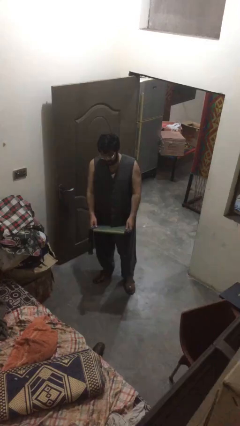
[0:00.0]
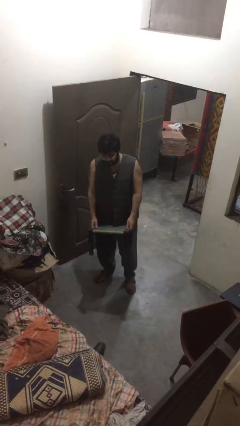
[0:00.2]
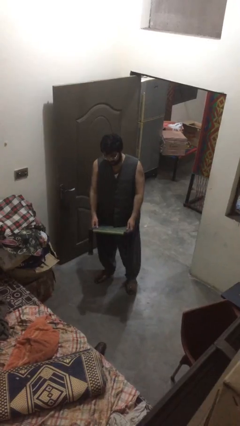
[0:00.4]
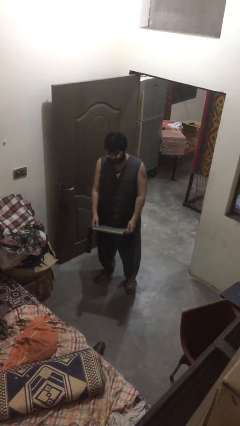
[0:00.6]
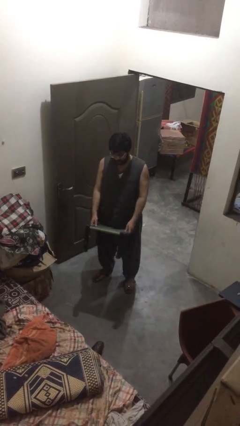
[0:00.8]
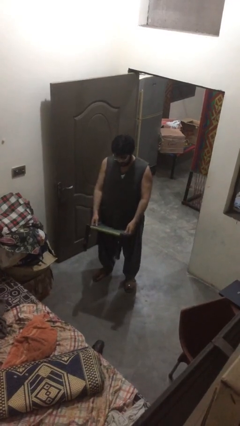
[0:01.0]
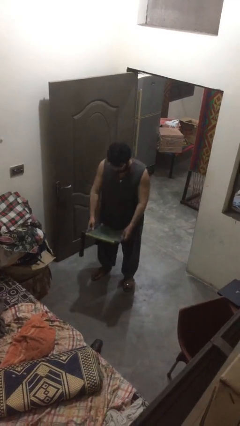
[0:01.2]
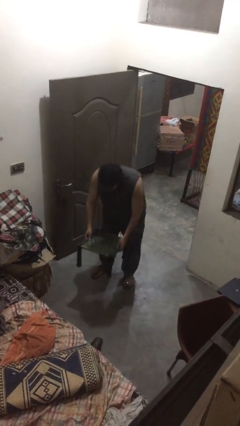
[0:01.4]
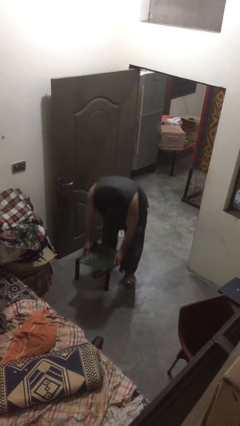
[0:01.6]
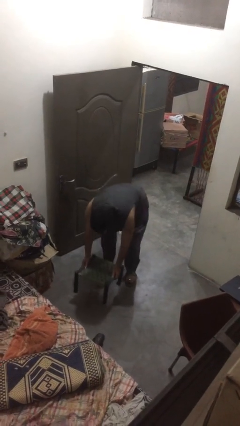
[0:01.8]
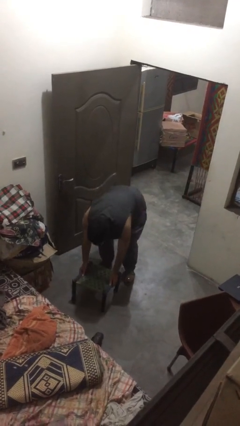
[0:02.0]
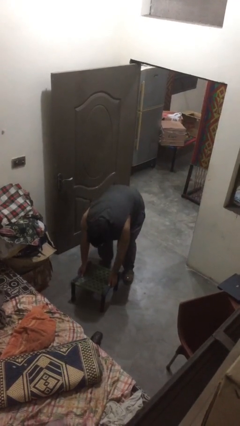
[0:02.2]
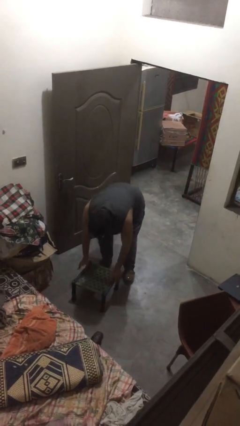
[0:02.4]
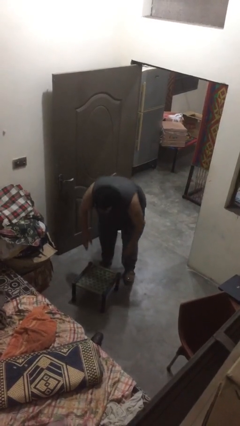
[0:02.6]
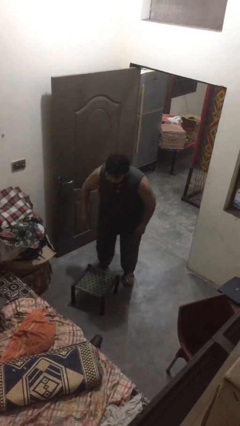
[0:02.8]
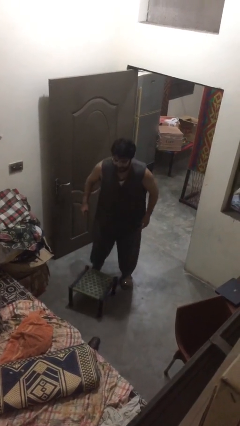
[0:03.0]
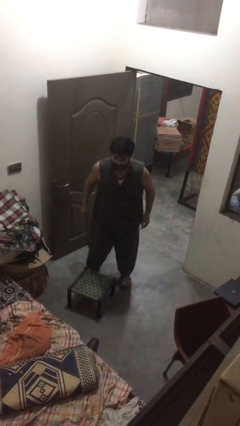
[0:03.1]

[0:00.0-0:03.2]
person puts down object on floor

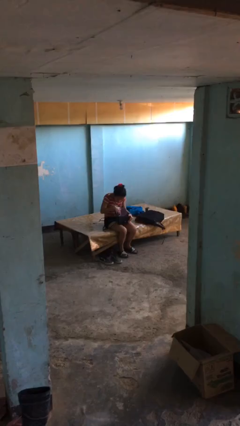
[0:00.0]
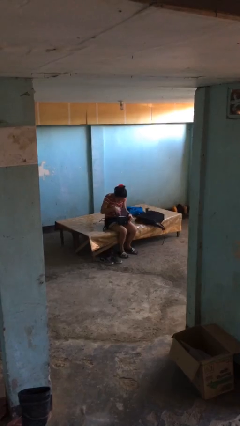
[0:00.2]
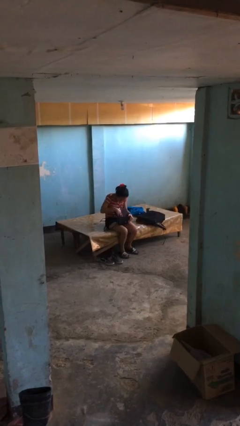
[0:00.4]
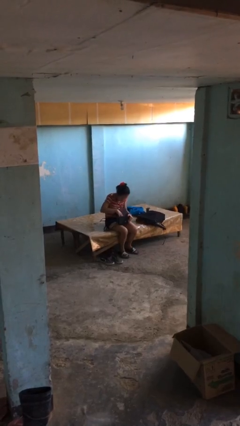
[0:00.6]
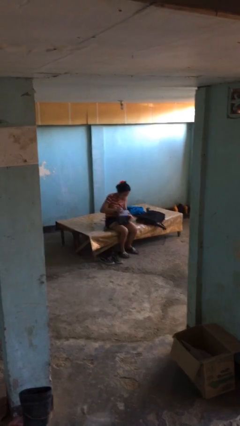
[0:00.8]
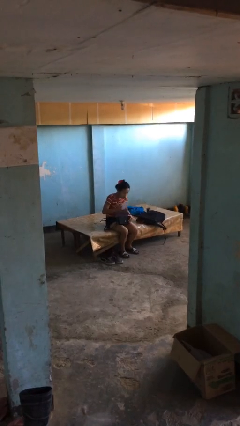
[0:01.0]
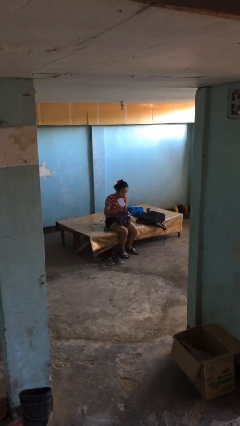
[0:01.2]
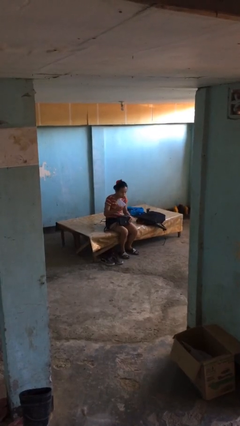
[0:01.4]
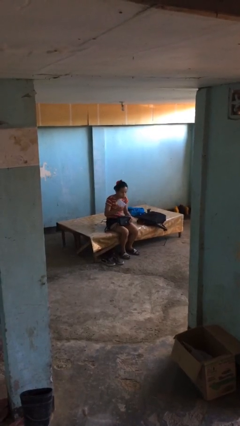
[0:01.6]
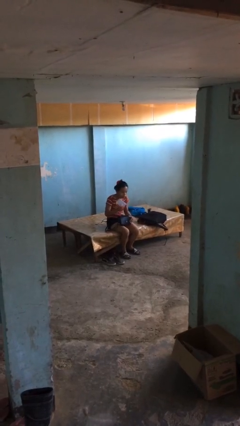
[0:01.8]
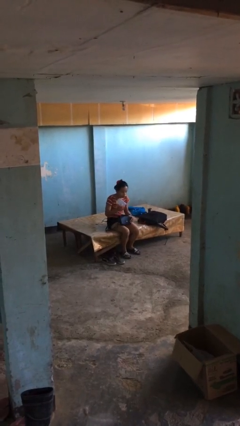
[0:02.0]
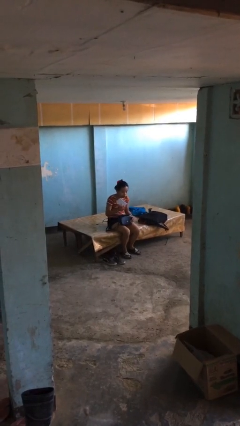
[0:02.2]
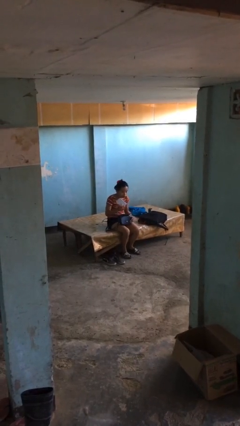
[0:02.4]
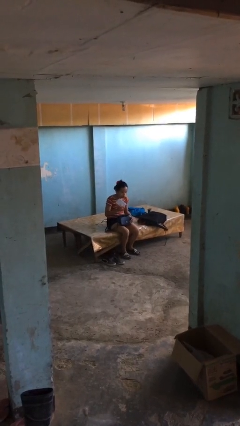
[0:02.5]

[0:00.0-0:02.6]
person takes object from purse

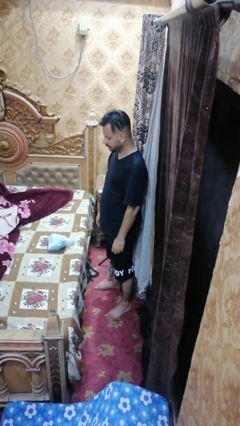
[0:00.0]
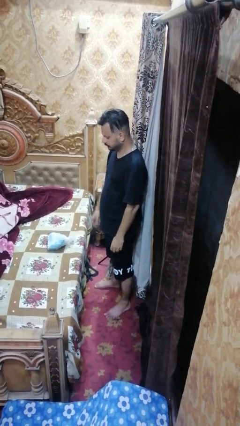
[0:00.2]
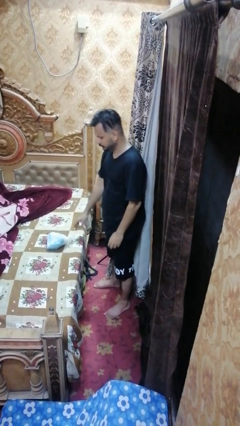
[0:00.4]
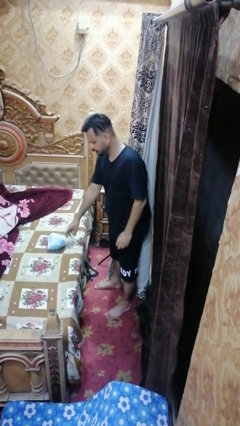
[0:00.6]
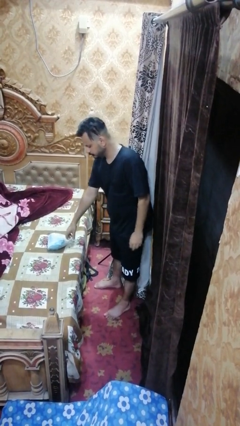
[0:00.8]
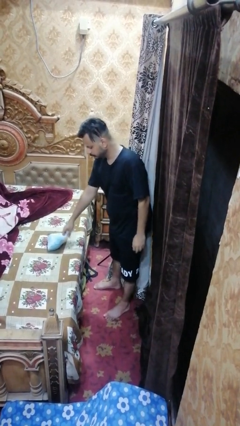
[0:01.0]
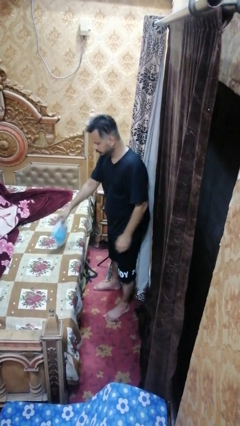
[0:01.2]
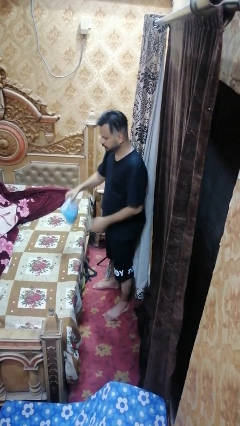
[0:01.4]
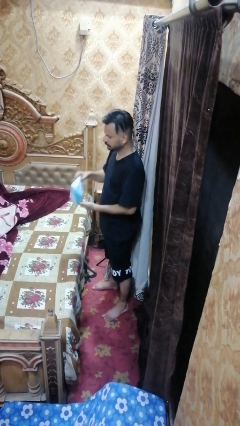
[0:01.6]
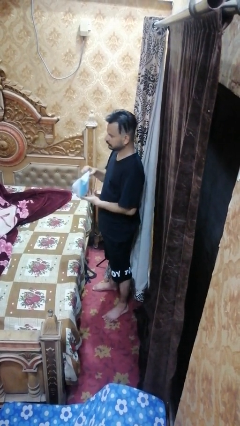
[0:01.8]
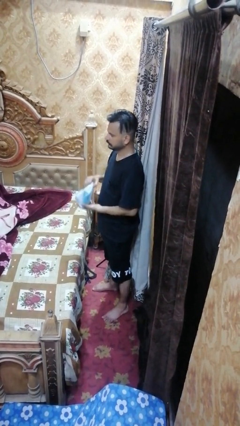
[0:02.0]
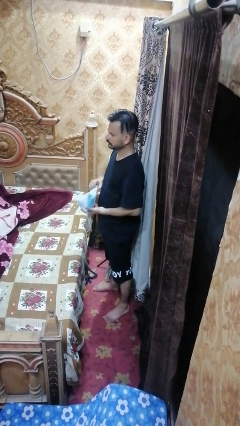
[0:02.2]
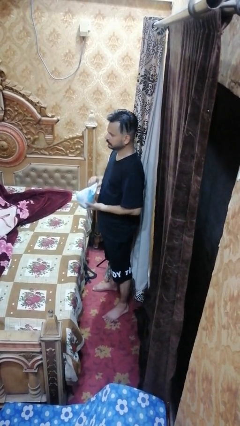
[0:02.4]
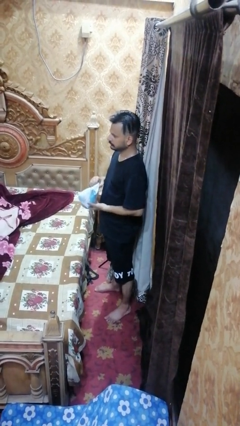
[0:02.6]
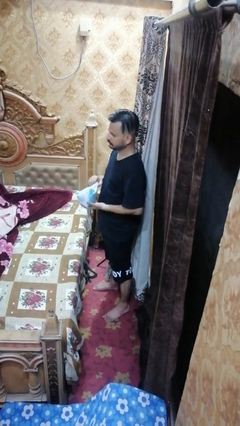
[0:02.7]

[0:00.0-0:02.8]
person picks up object from bed

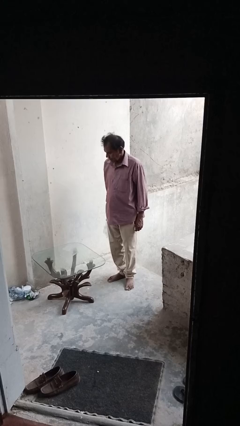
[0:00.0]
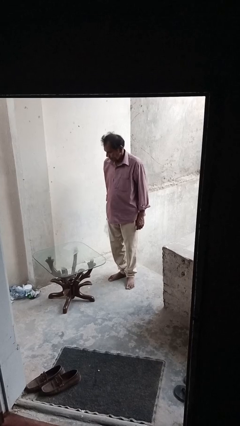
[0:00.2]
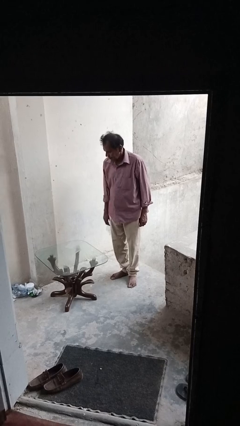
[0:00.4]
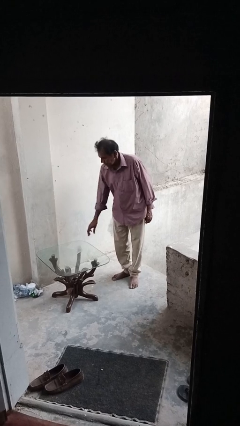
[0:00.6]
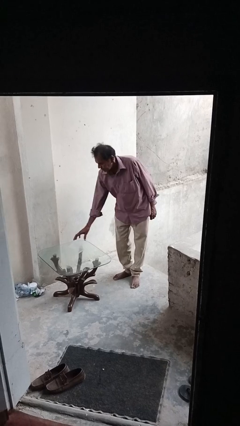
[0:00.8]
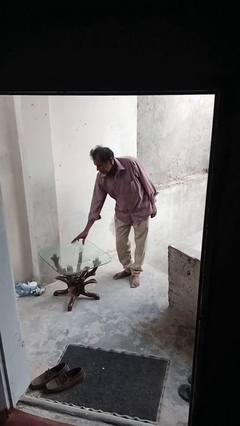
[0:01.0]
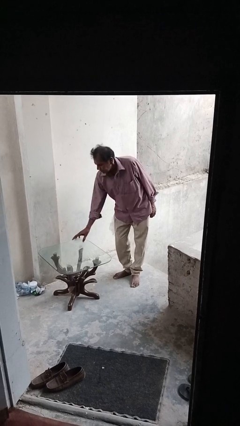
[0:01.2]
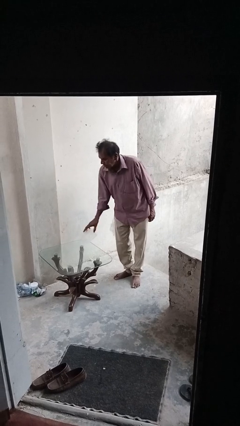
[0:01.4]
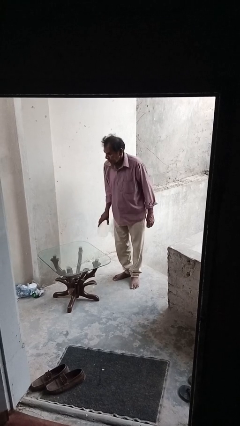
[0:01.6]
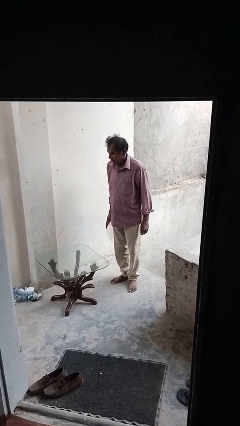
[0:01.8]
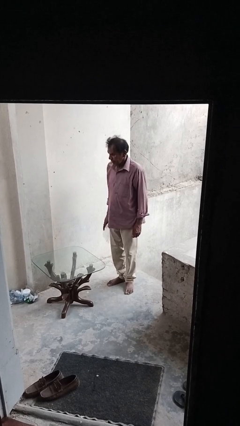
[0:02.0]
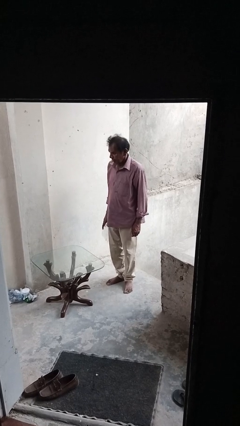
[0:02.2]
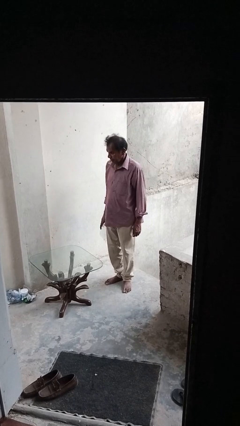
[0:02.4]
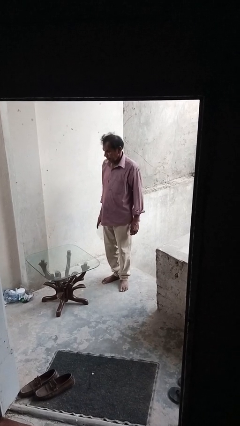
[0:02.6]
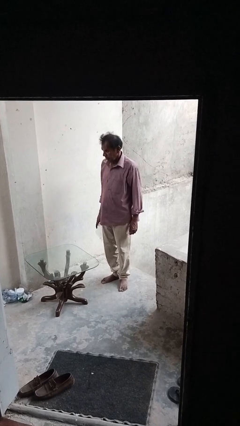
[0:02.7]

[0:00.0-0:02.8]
person picks up object from table

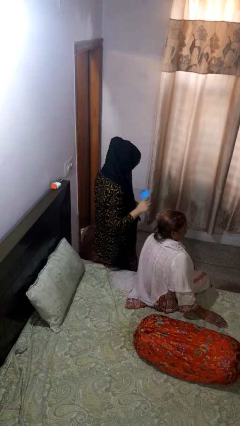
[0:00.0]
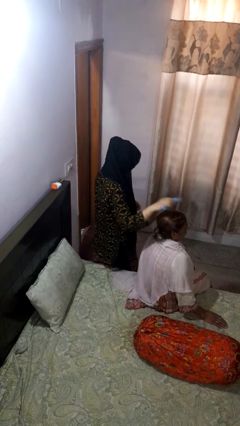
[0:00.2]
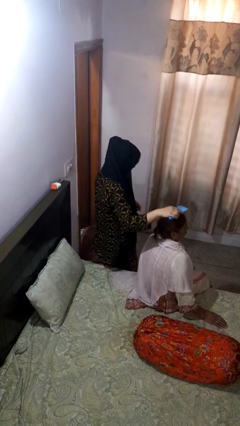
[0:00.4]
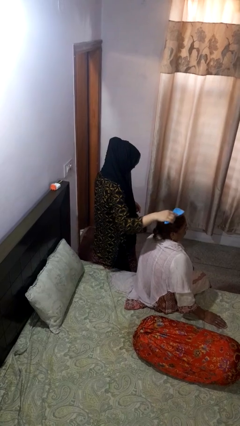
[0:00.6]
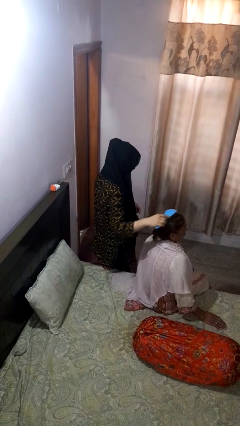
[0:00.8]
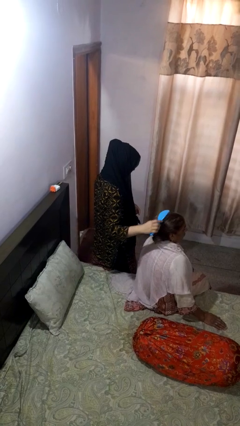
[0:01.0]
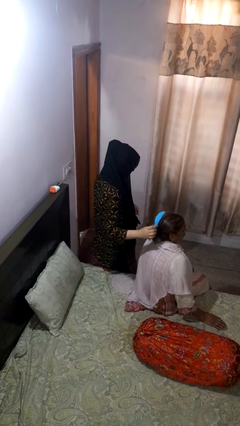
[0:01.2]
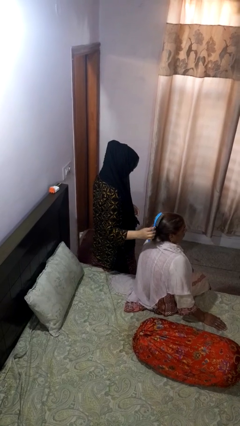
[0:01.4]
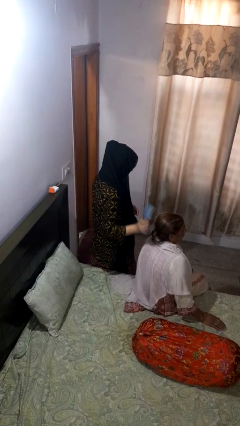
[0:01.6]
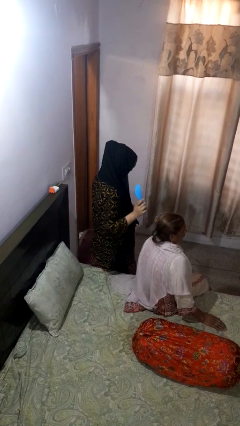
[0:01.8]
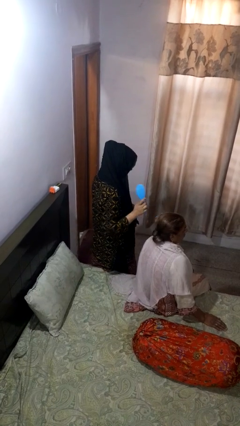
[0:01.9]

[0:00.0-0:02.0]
person brushes hair of person

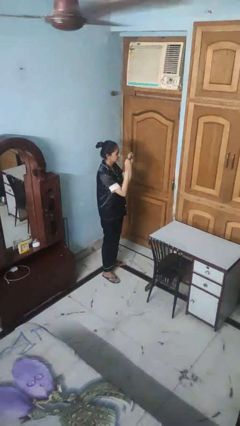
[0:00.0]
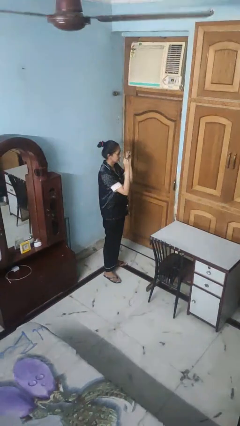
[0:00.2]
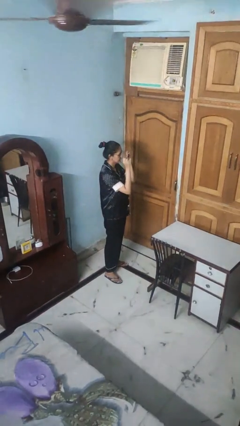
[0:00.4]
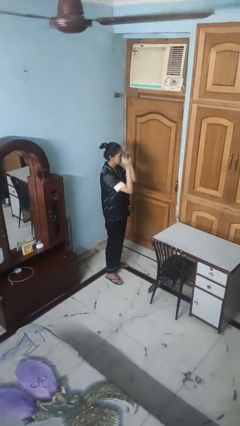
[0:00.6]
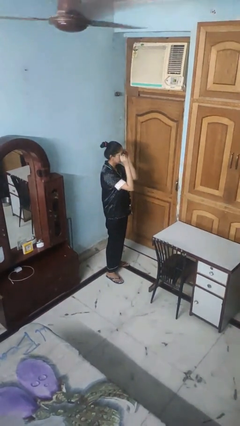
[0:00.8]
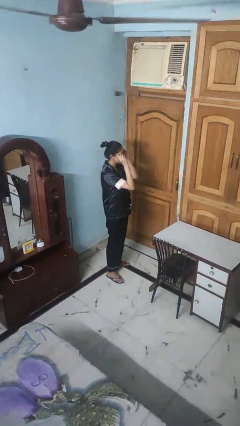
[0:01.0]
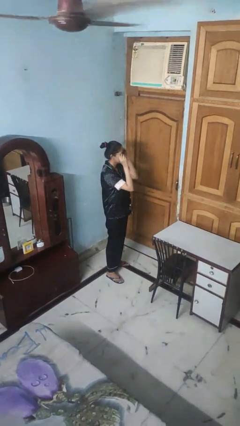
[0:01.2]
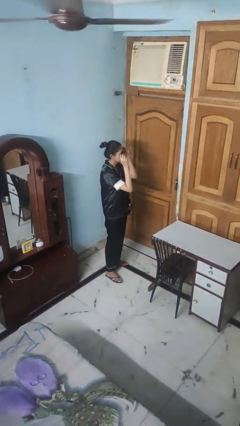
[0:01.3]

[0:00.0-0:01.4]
person puts on sunglasses

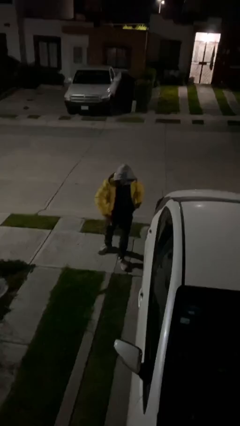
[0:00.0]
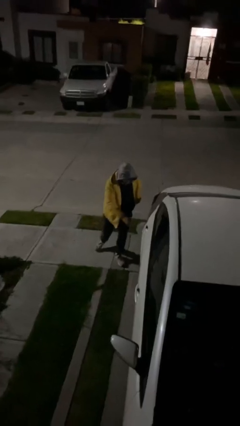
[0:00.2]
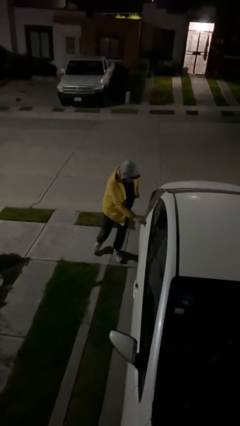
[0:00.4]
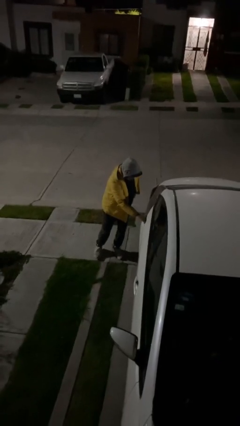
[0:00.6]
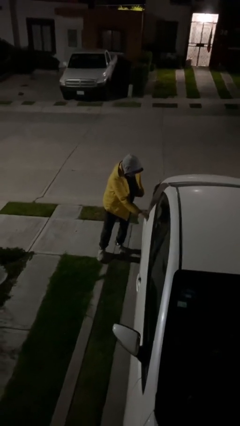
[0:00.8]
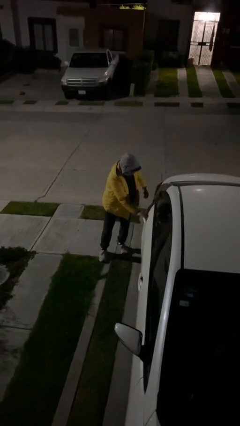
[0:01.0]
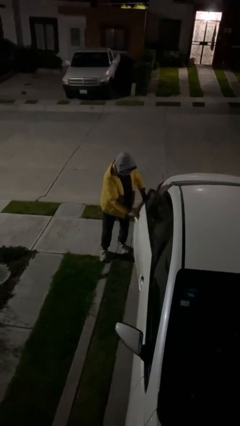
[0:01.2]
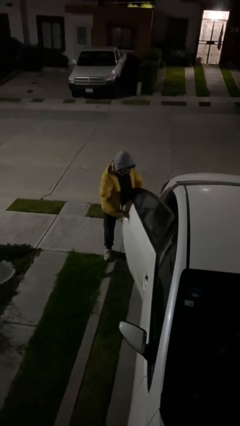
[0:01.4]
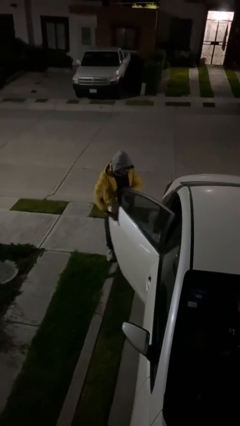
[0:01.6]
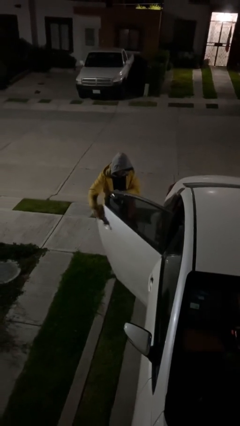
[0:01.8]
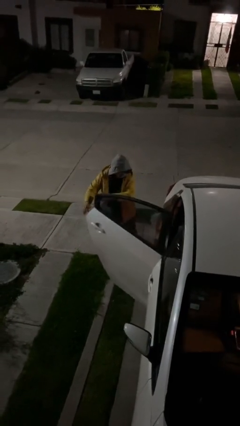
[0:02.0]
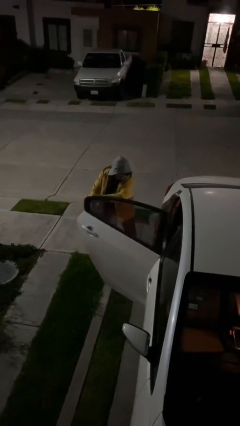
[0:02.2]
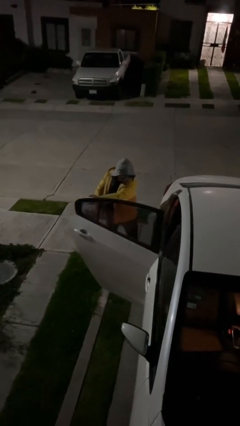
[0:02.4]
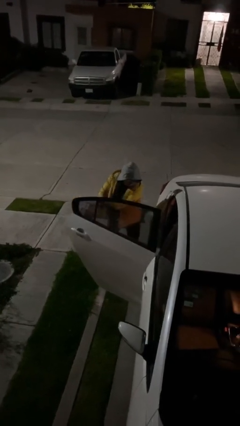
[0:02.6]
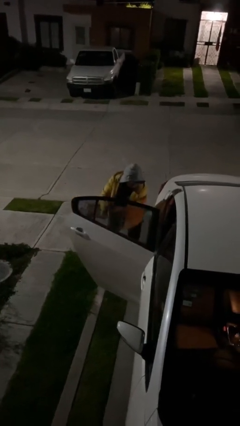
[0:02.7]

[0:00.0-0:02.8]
person opens car door
